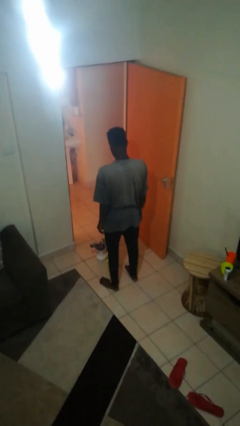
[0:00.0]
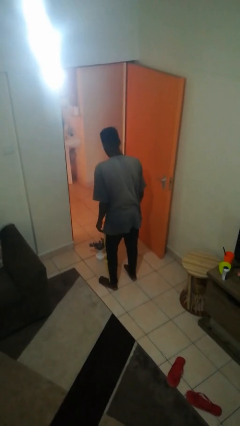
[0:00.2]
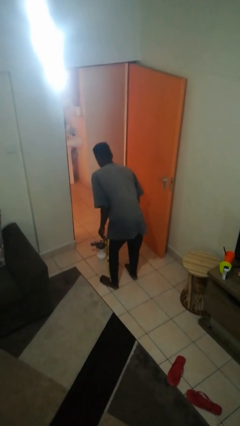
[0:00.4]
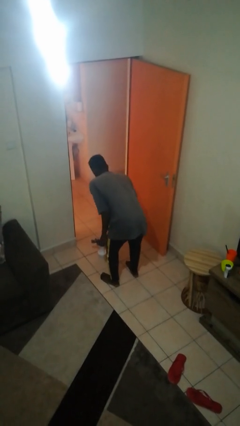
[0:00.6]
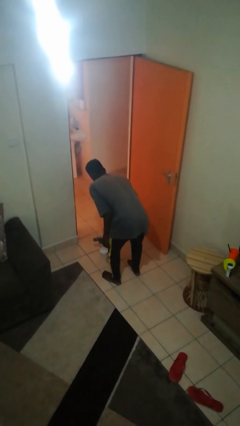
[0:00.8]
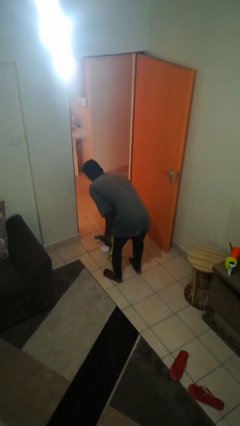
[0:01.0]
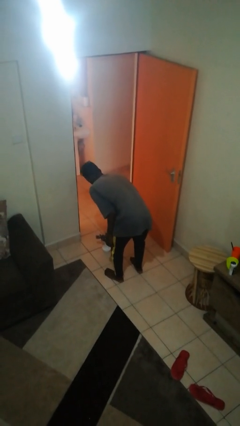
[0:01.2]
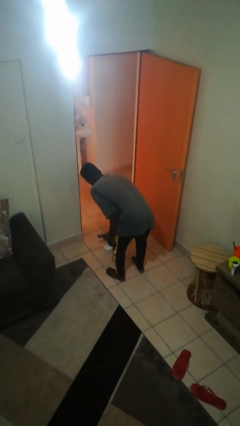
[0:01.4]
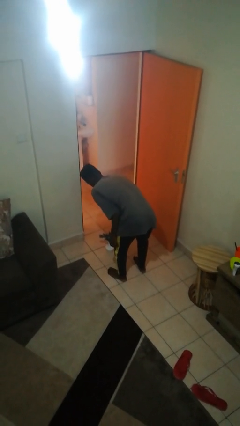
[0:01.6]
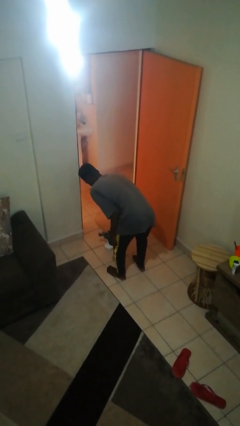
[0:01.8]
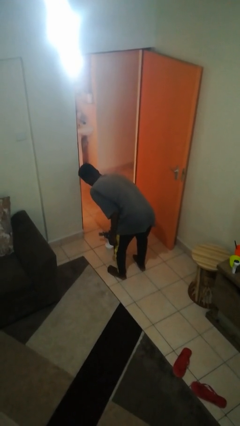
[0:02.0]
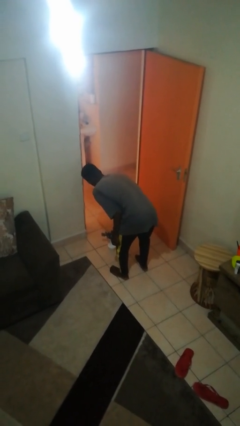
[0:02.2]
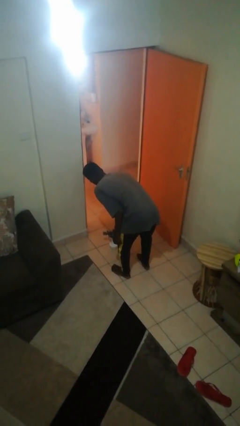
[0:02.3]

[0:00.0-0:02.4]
person waters houseplant

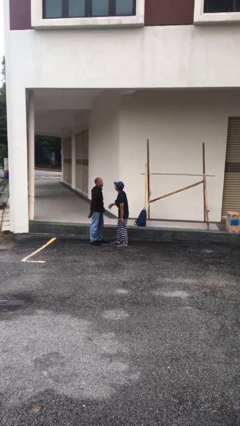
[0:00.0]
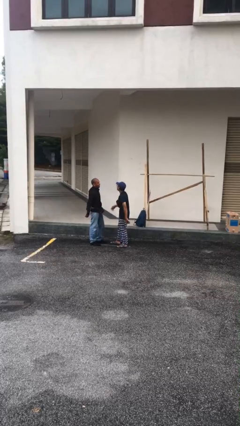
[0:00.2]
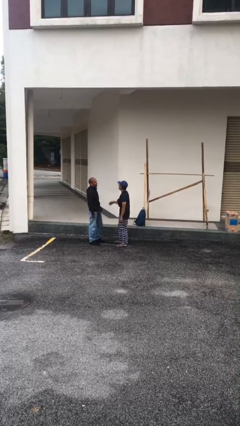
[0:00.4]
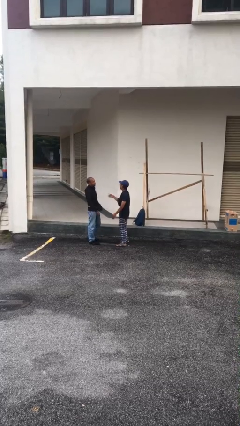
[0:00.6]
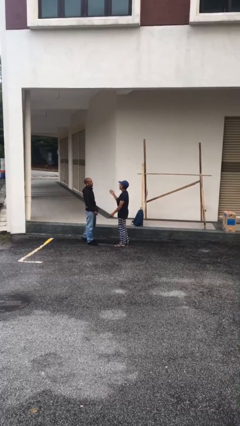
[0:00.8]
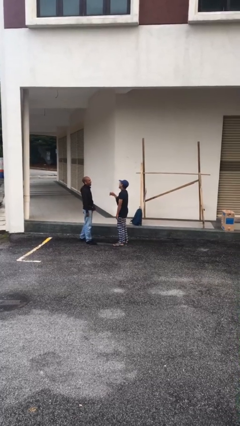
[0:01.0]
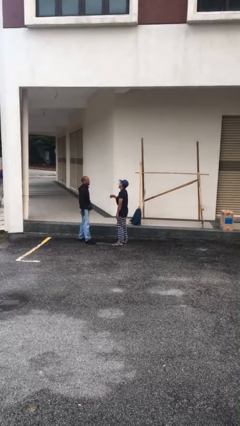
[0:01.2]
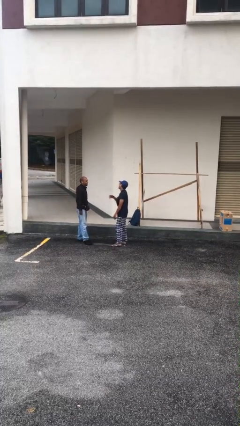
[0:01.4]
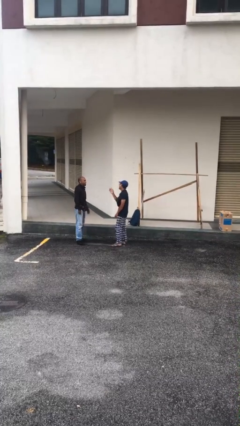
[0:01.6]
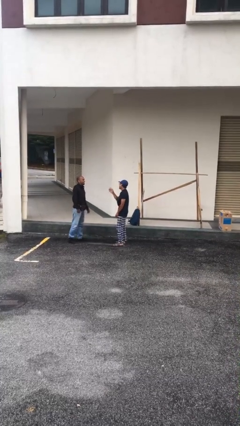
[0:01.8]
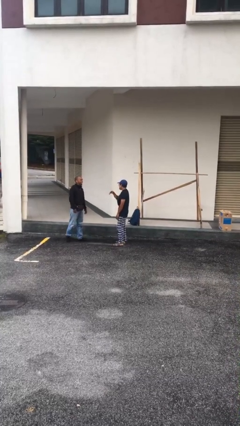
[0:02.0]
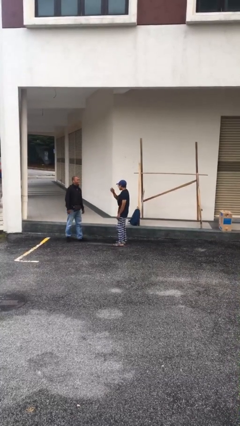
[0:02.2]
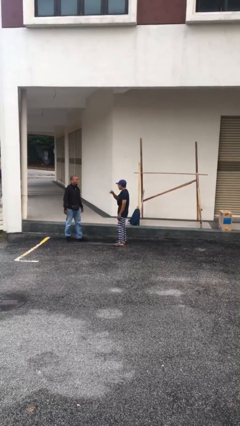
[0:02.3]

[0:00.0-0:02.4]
person talks to person

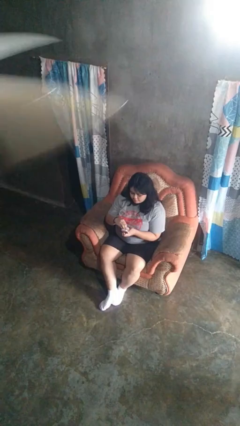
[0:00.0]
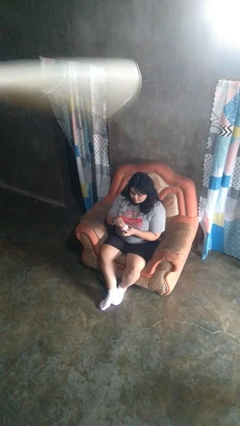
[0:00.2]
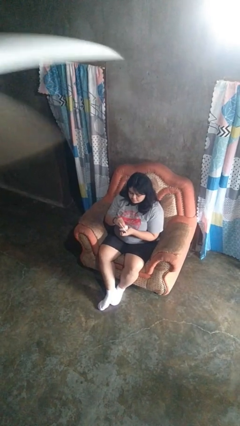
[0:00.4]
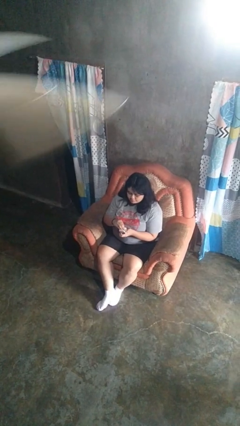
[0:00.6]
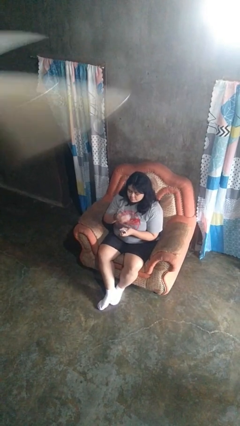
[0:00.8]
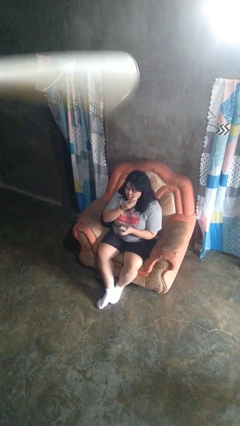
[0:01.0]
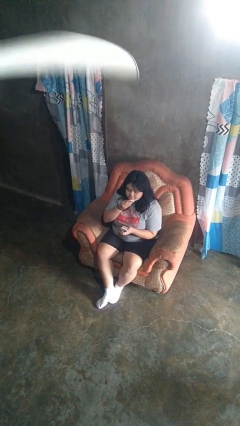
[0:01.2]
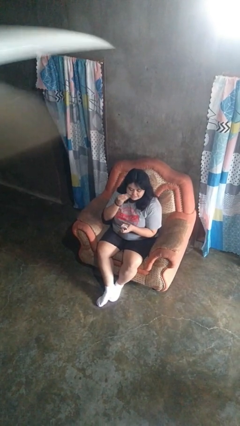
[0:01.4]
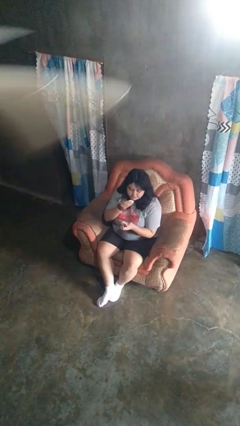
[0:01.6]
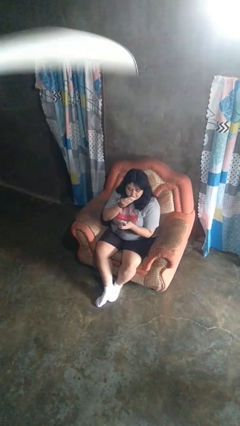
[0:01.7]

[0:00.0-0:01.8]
person applies foundation makeup

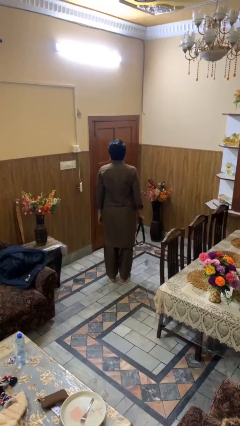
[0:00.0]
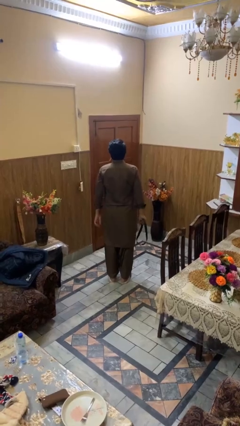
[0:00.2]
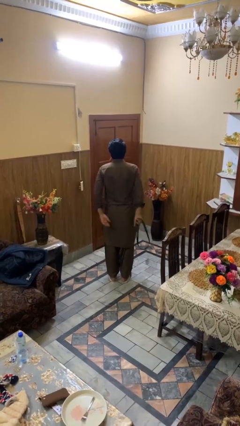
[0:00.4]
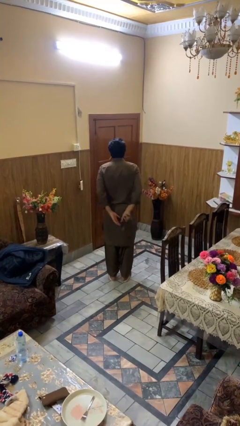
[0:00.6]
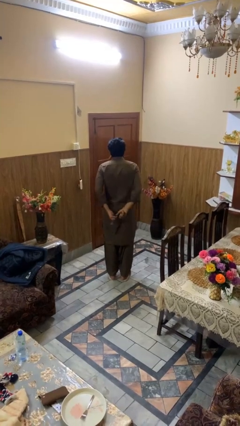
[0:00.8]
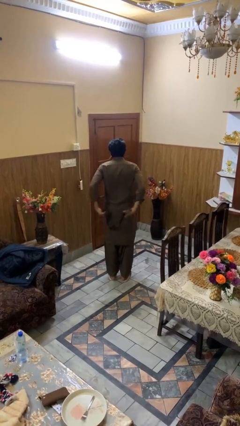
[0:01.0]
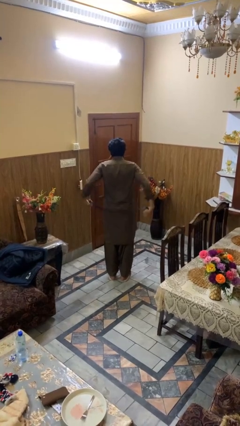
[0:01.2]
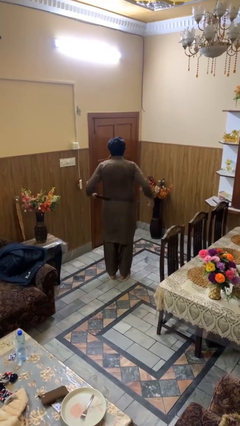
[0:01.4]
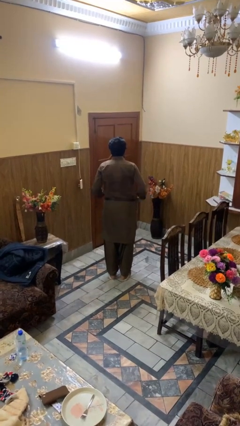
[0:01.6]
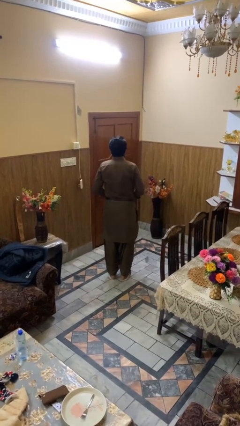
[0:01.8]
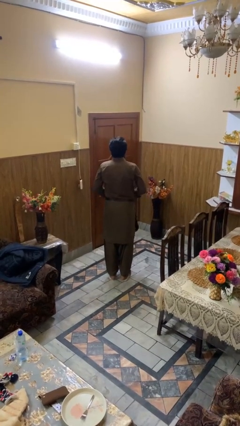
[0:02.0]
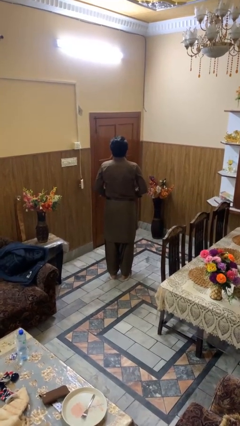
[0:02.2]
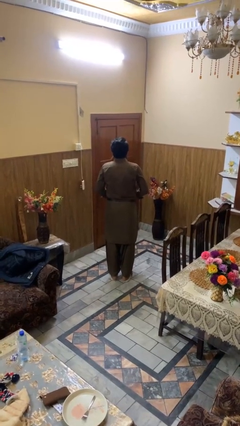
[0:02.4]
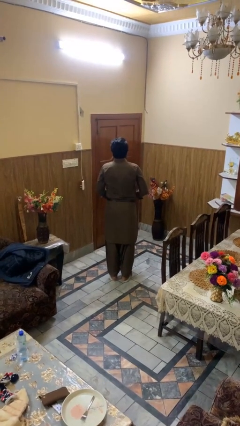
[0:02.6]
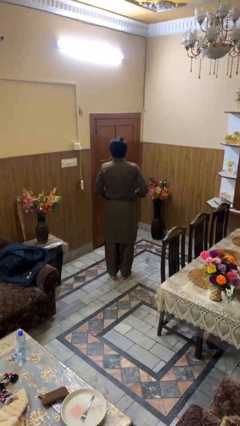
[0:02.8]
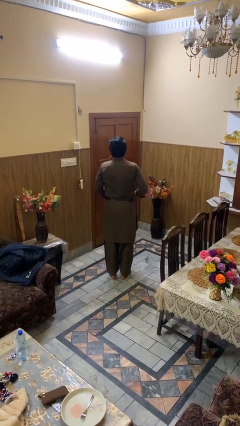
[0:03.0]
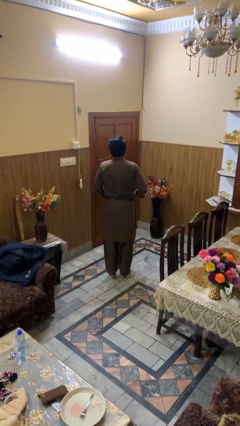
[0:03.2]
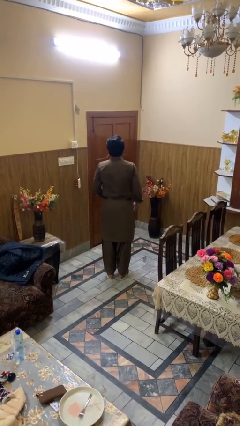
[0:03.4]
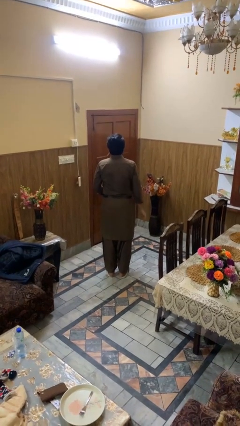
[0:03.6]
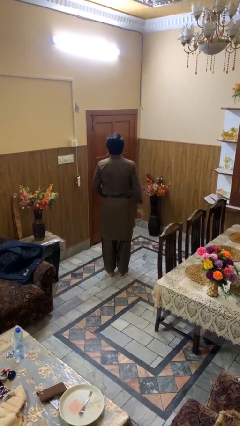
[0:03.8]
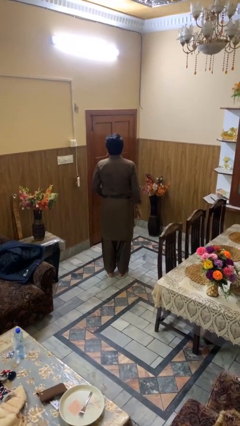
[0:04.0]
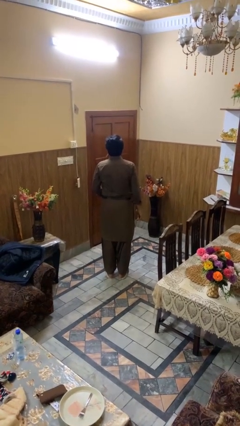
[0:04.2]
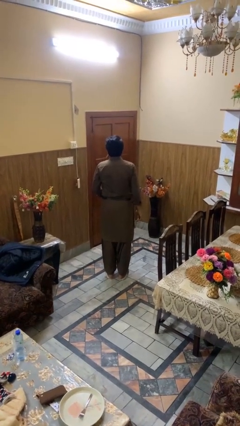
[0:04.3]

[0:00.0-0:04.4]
person puts on belt

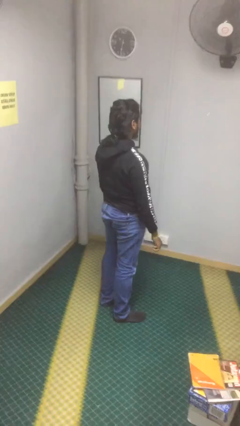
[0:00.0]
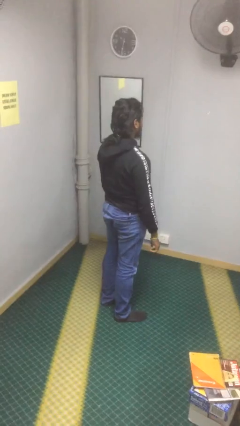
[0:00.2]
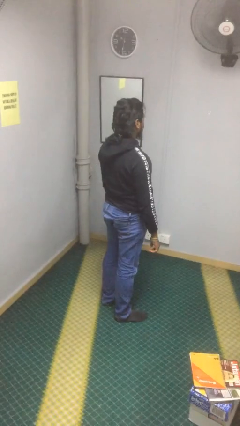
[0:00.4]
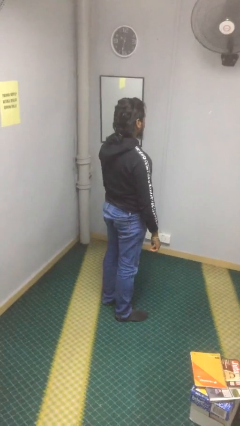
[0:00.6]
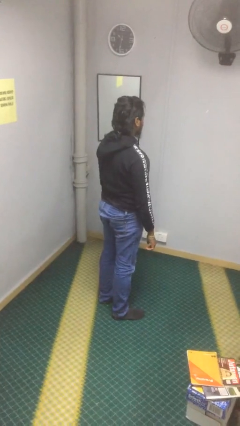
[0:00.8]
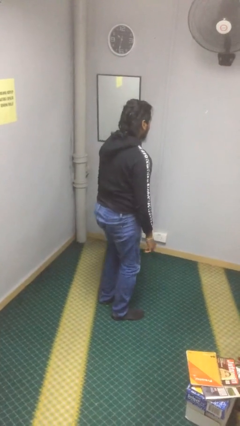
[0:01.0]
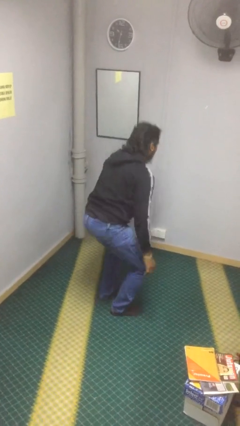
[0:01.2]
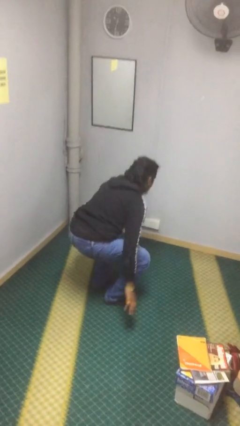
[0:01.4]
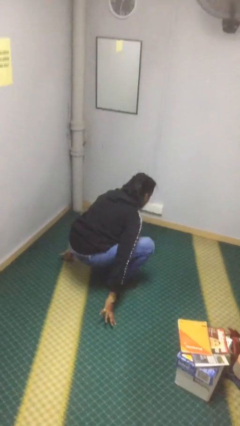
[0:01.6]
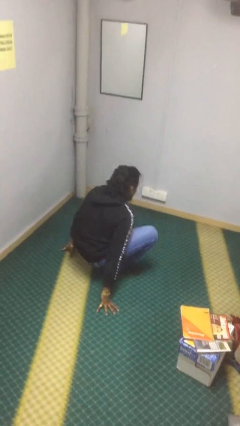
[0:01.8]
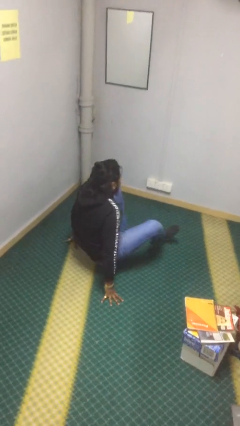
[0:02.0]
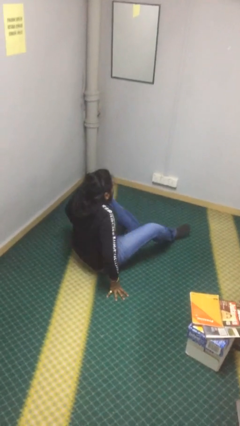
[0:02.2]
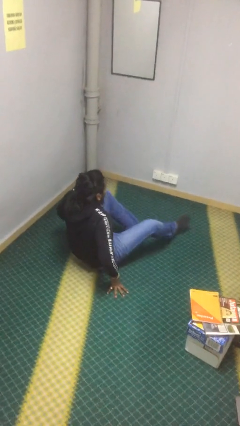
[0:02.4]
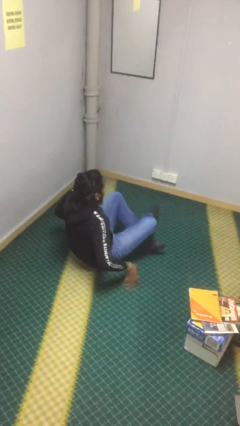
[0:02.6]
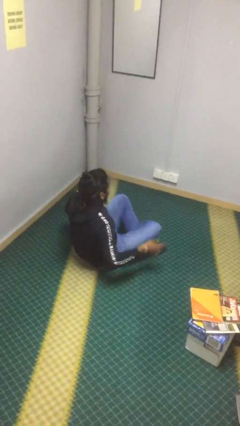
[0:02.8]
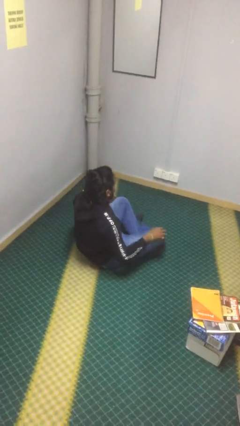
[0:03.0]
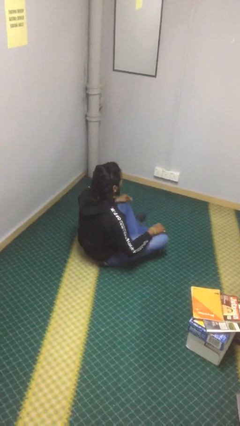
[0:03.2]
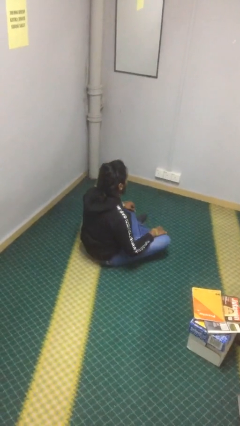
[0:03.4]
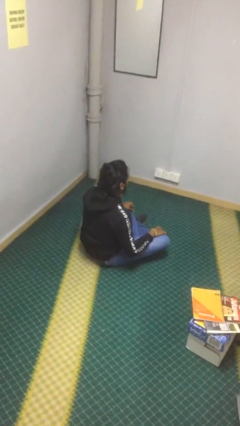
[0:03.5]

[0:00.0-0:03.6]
person sits crisscross

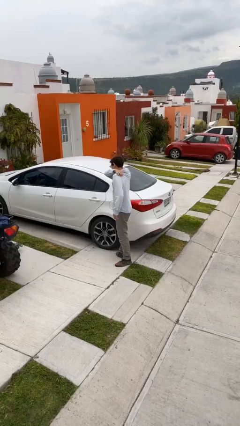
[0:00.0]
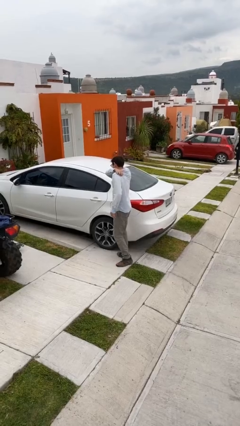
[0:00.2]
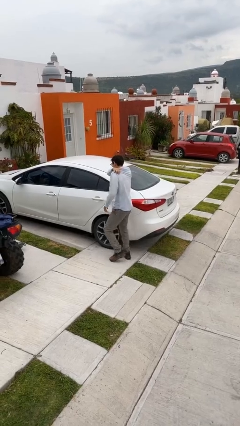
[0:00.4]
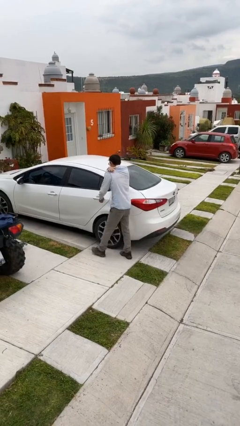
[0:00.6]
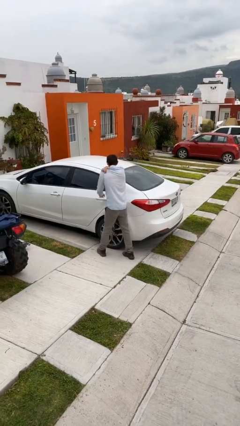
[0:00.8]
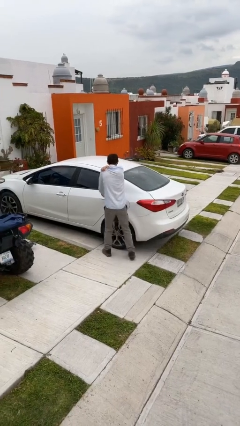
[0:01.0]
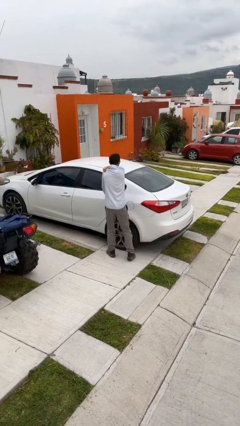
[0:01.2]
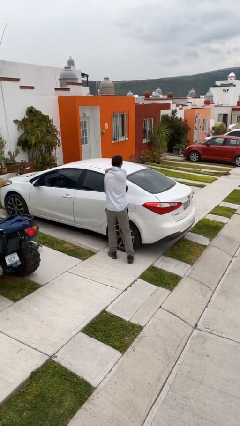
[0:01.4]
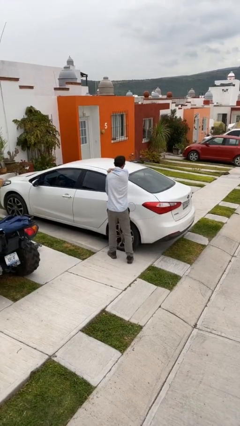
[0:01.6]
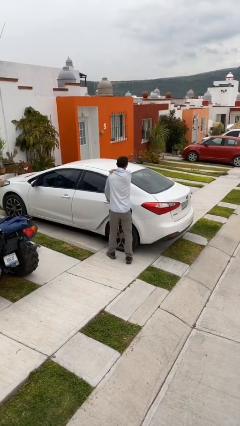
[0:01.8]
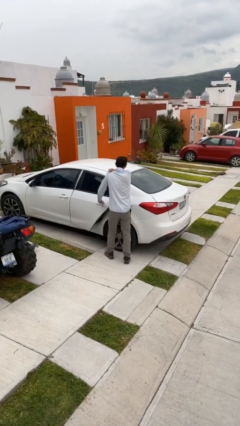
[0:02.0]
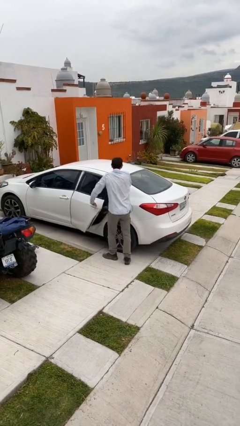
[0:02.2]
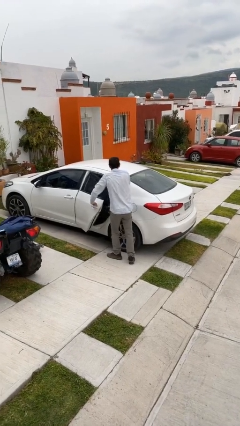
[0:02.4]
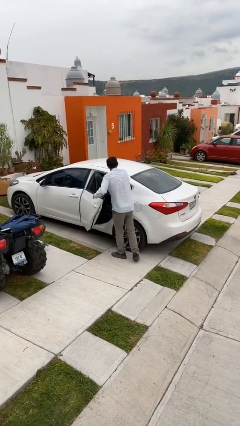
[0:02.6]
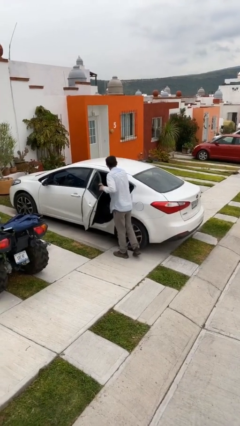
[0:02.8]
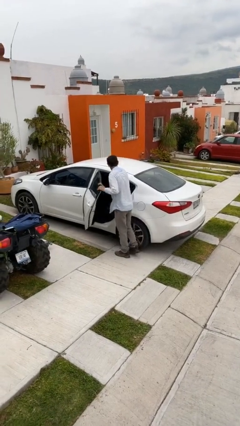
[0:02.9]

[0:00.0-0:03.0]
person opens car door
